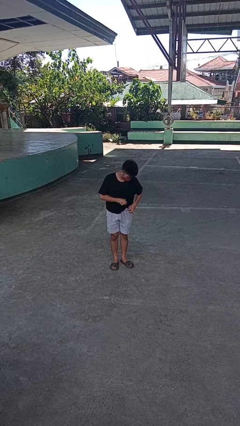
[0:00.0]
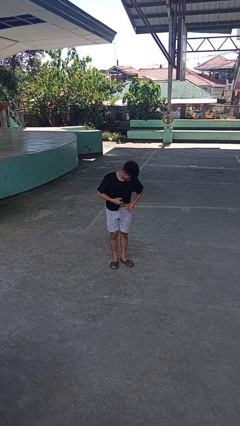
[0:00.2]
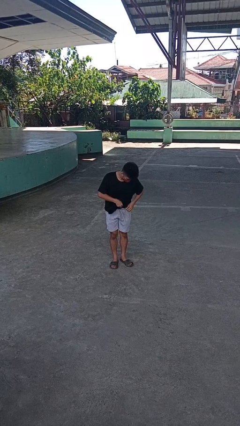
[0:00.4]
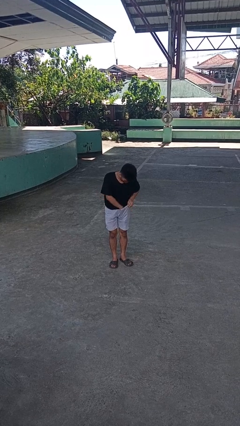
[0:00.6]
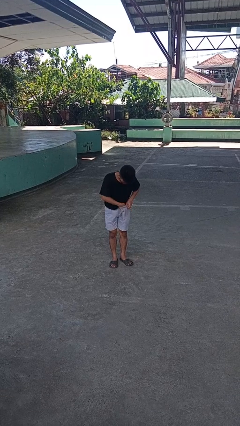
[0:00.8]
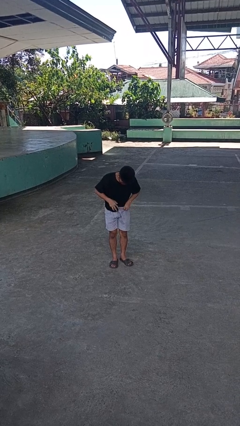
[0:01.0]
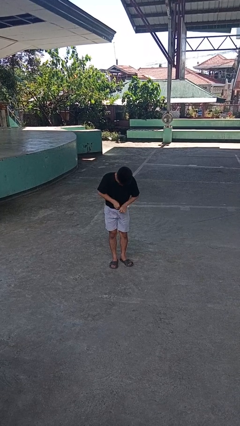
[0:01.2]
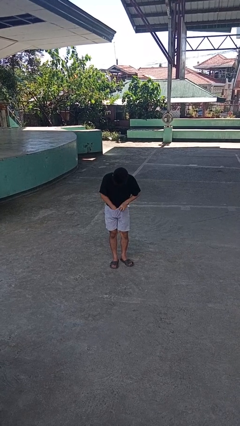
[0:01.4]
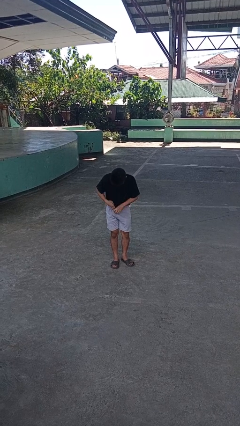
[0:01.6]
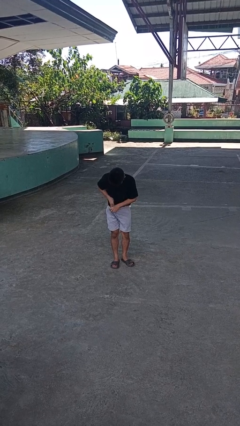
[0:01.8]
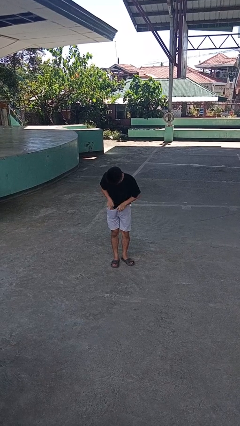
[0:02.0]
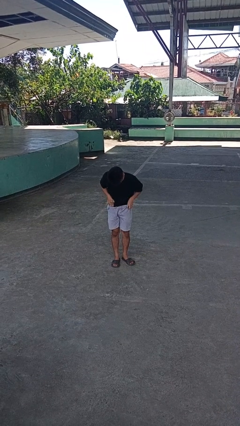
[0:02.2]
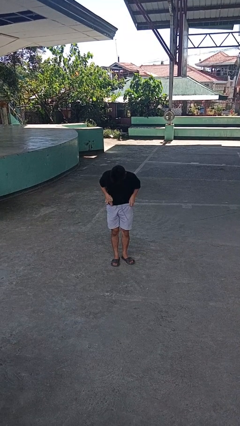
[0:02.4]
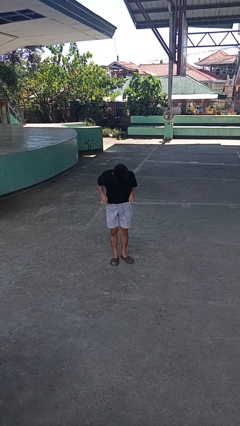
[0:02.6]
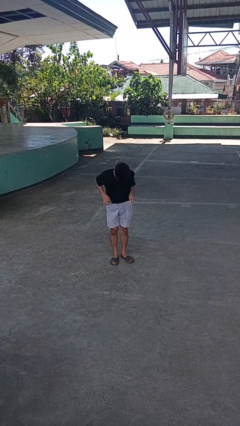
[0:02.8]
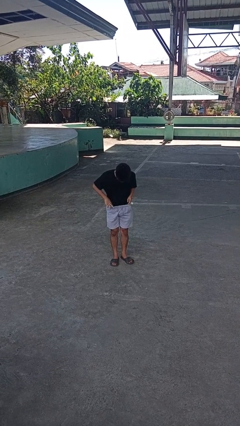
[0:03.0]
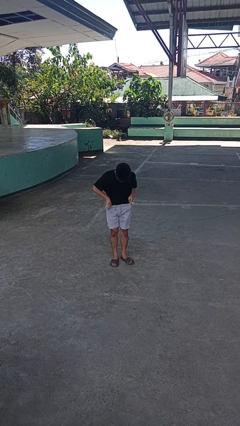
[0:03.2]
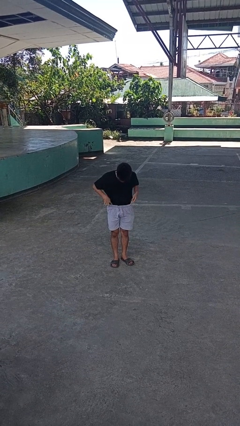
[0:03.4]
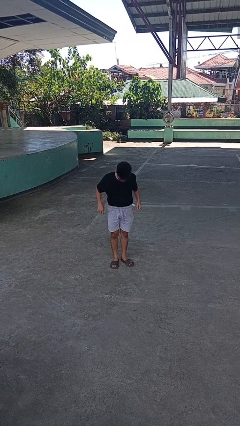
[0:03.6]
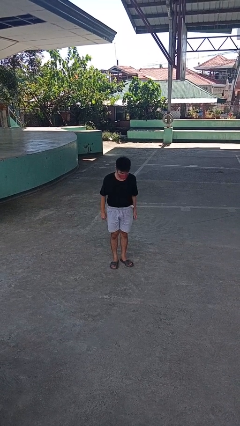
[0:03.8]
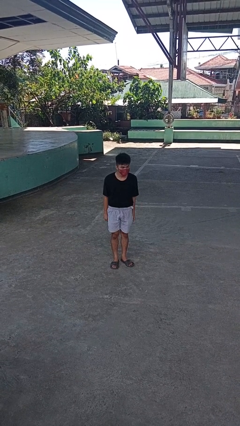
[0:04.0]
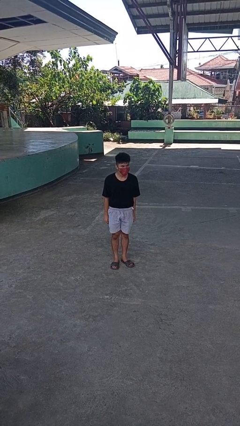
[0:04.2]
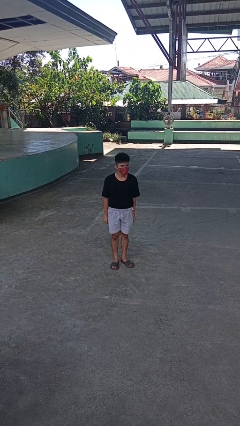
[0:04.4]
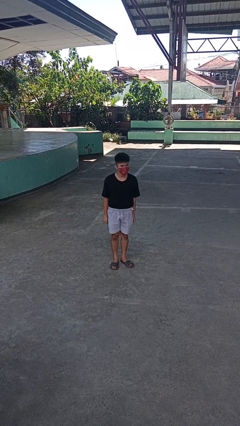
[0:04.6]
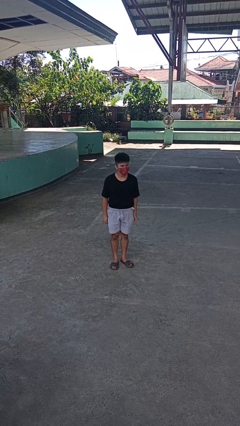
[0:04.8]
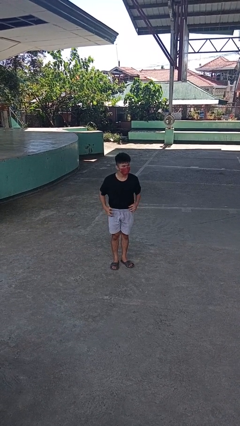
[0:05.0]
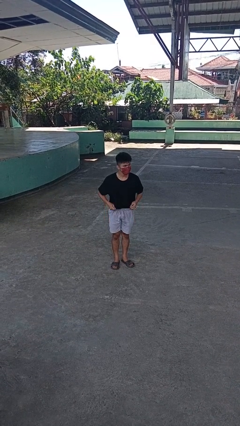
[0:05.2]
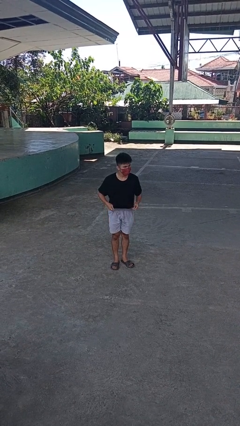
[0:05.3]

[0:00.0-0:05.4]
person tucks in shirt

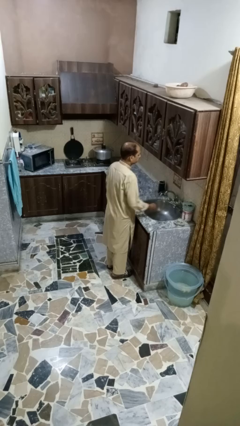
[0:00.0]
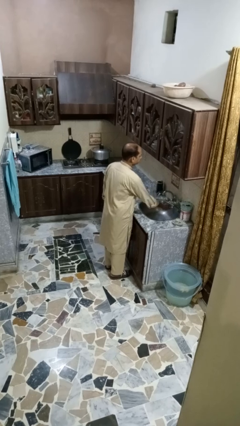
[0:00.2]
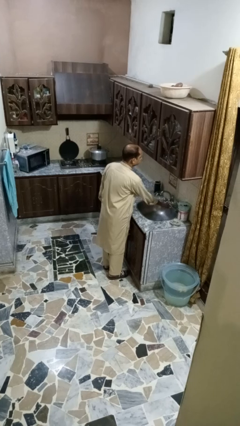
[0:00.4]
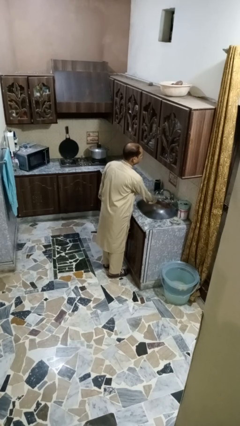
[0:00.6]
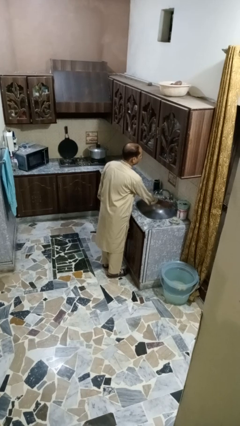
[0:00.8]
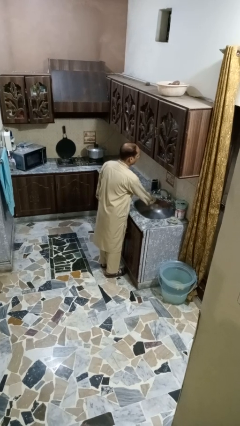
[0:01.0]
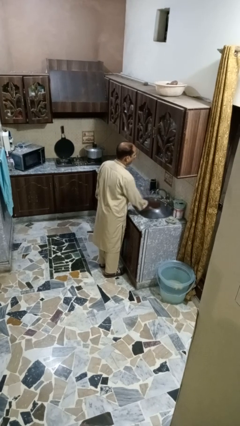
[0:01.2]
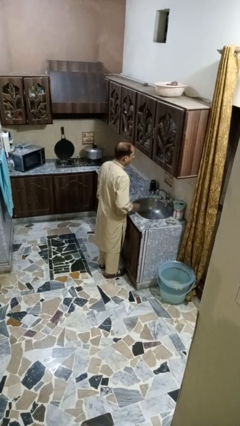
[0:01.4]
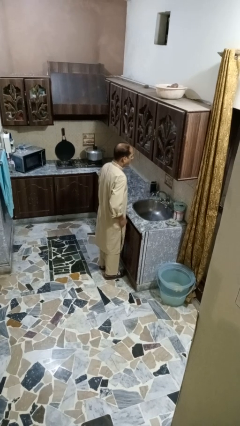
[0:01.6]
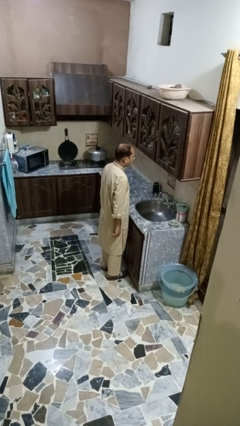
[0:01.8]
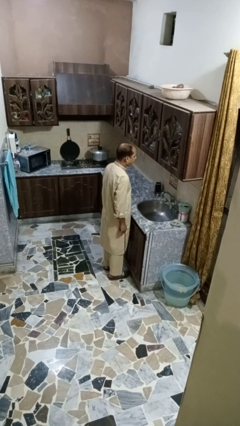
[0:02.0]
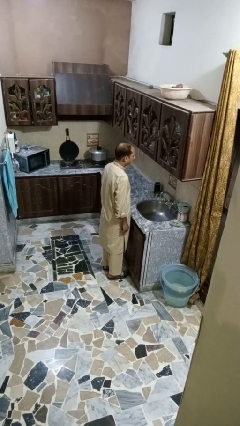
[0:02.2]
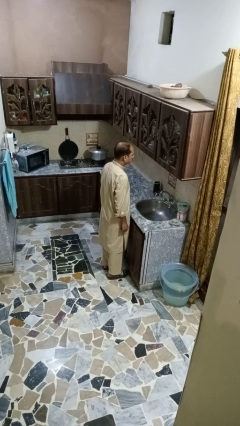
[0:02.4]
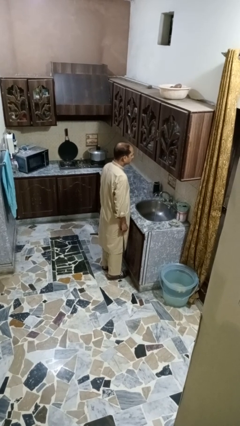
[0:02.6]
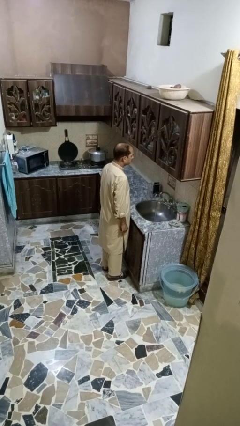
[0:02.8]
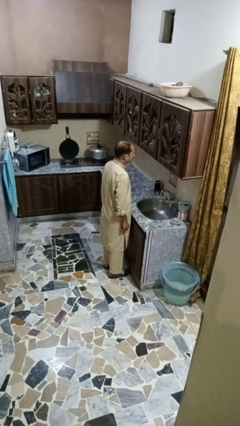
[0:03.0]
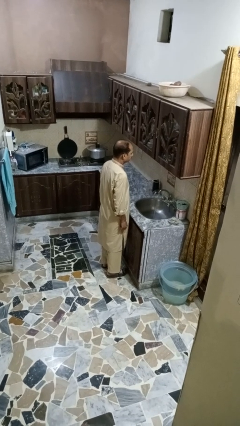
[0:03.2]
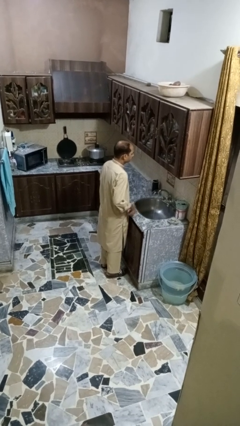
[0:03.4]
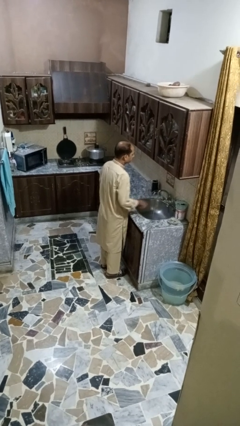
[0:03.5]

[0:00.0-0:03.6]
person turns on faucet

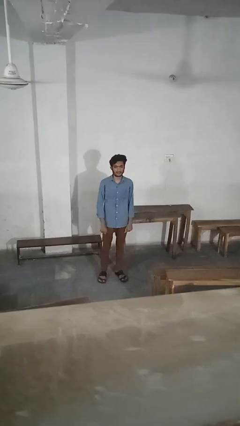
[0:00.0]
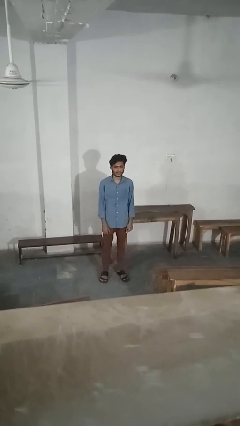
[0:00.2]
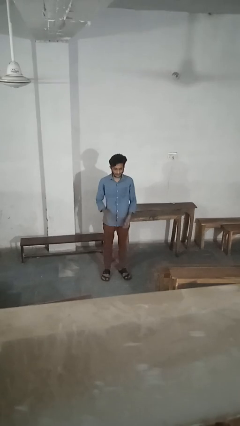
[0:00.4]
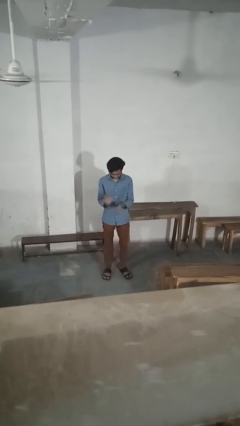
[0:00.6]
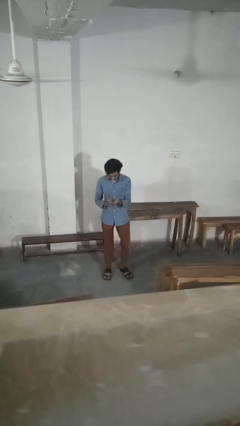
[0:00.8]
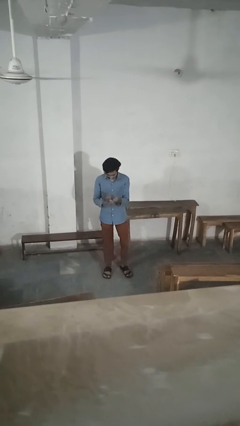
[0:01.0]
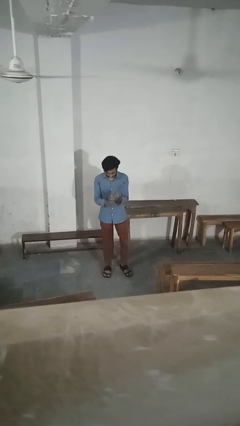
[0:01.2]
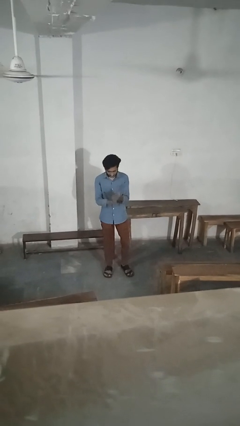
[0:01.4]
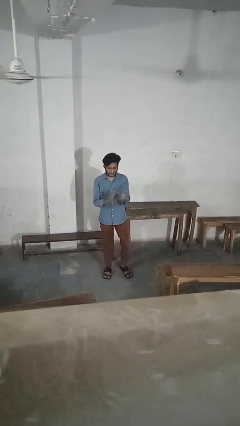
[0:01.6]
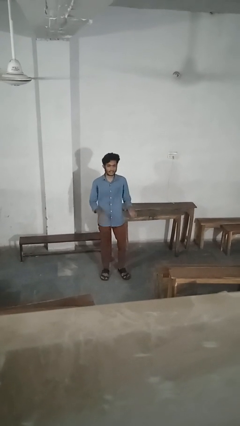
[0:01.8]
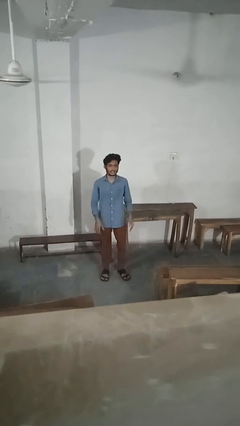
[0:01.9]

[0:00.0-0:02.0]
person claps hands

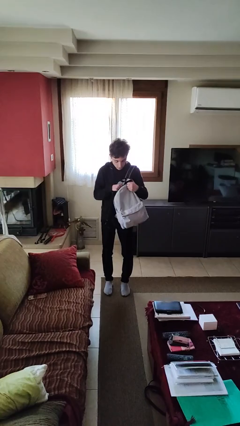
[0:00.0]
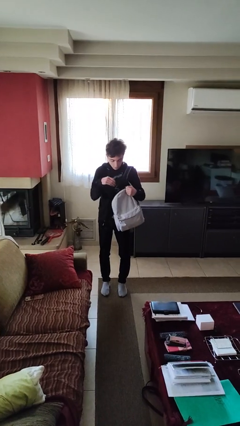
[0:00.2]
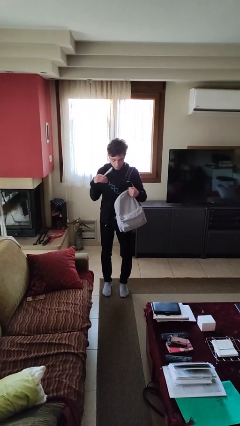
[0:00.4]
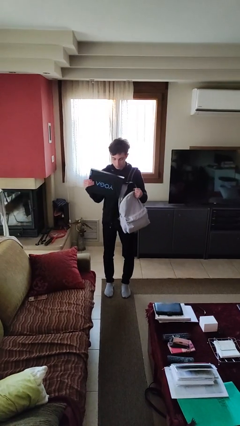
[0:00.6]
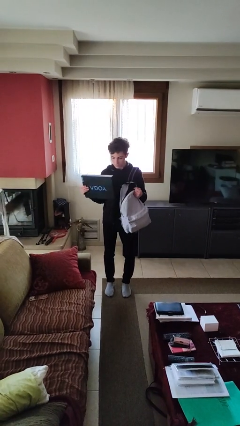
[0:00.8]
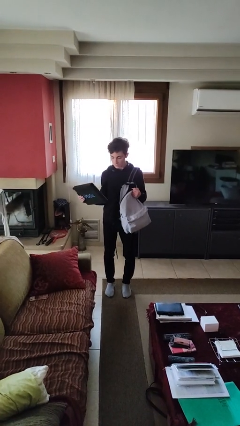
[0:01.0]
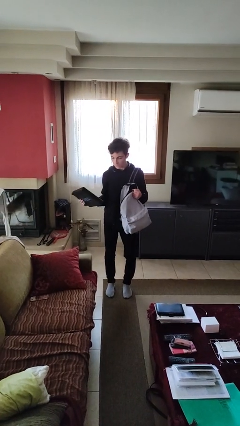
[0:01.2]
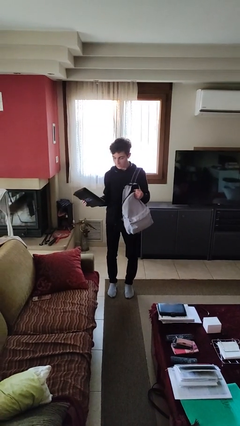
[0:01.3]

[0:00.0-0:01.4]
person takes object from backpack

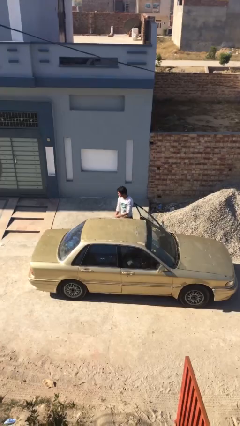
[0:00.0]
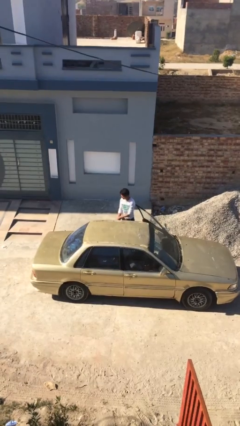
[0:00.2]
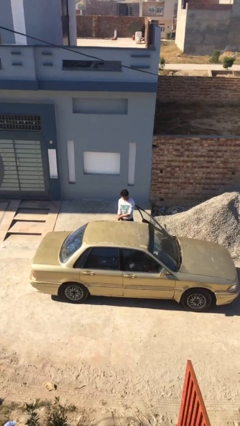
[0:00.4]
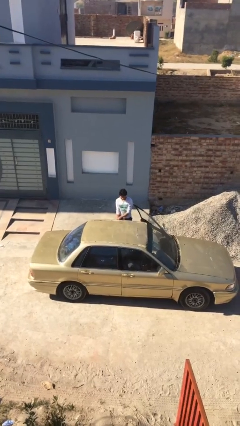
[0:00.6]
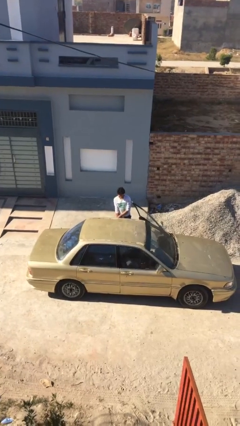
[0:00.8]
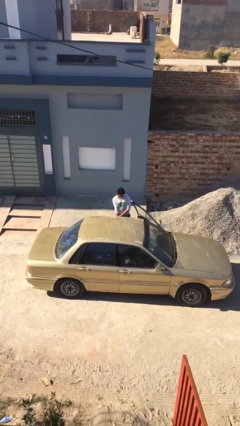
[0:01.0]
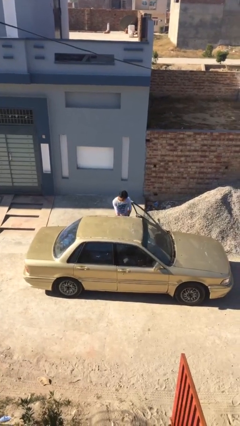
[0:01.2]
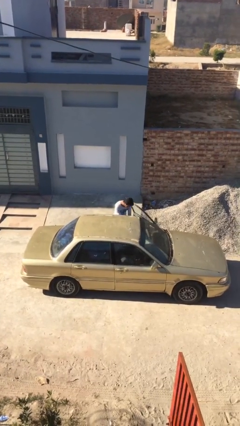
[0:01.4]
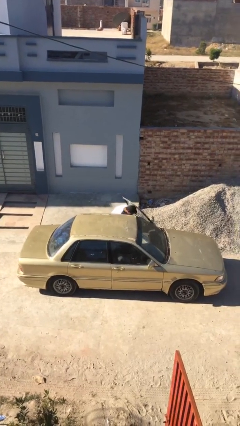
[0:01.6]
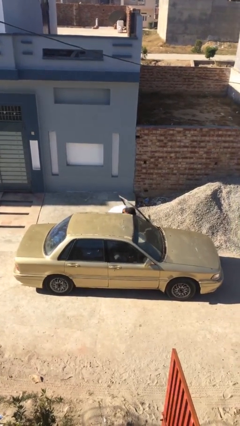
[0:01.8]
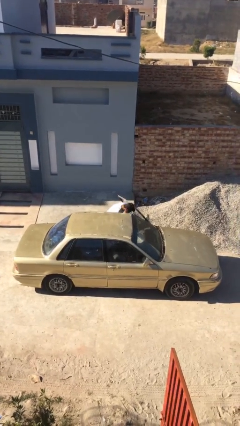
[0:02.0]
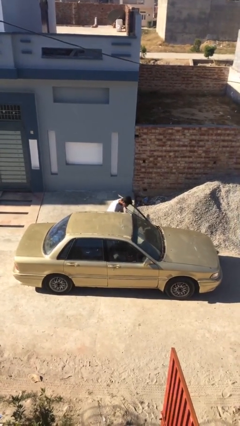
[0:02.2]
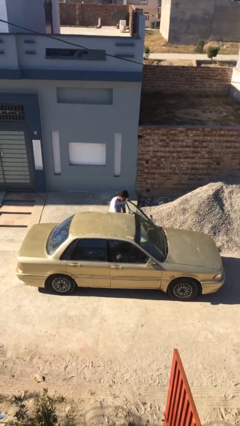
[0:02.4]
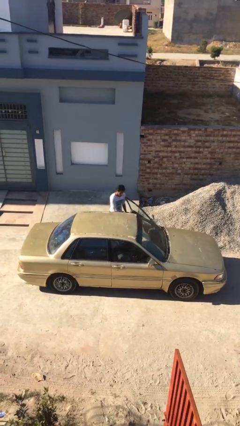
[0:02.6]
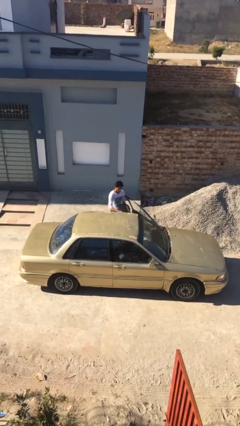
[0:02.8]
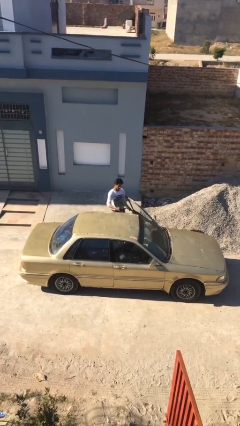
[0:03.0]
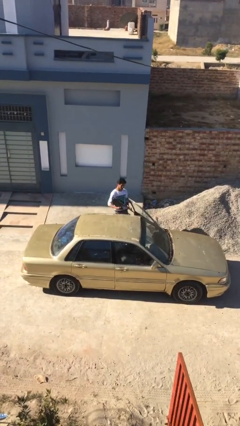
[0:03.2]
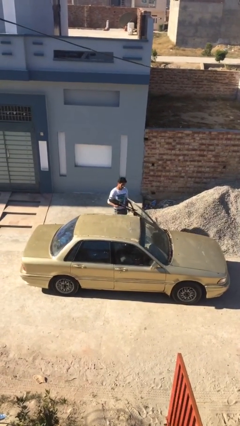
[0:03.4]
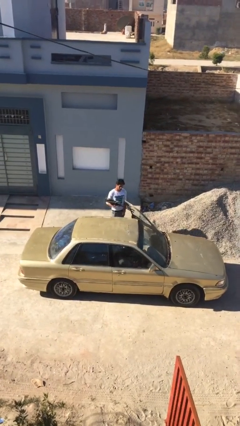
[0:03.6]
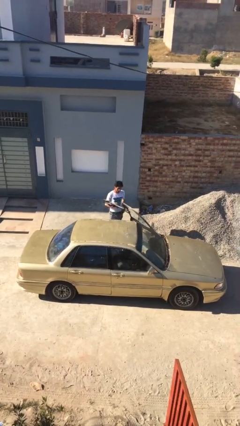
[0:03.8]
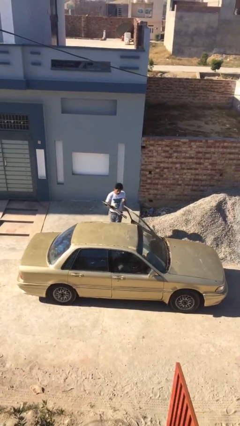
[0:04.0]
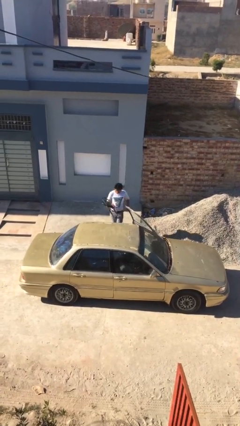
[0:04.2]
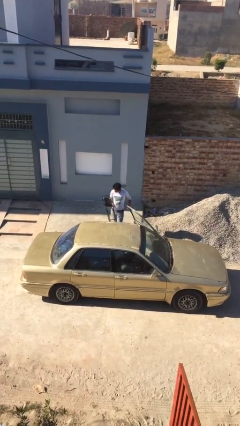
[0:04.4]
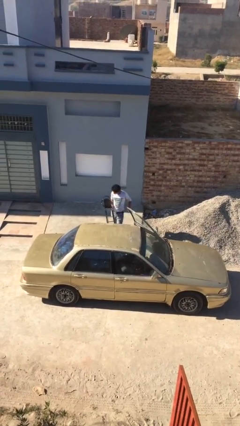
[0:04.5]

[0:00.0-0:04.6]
person unloads car

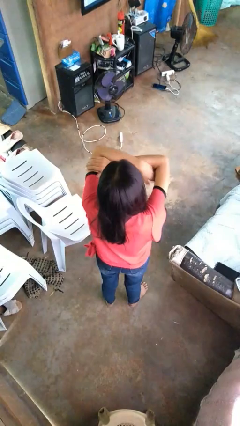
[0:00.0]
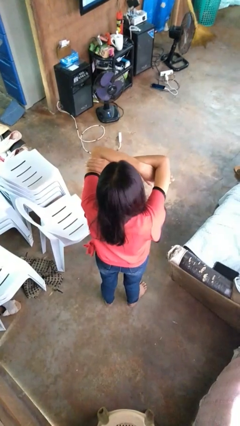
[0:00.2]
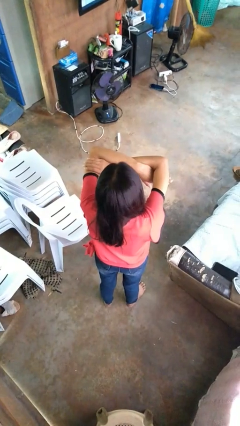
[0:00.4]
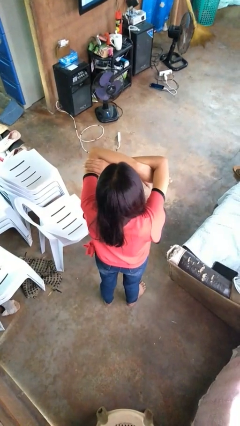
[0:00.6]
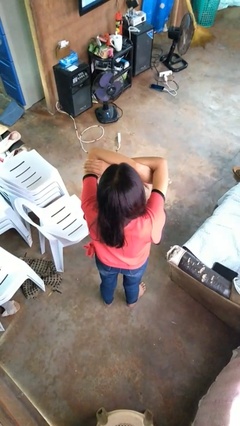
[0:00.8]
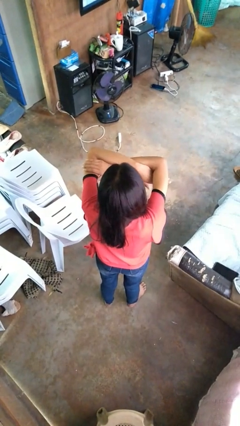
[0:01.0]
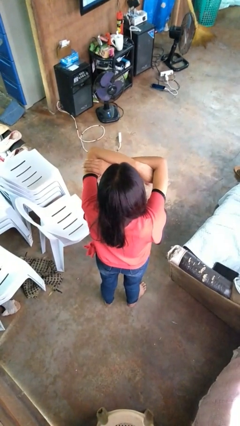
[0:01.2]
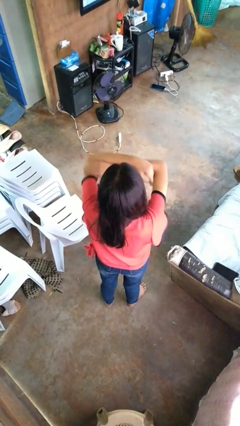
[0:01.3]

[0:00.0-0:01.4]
person gestures arms x
